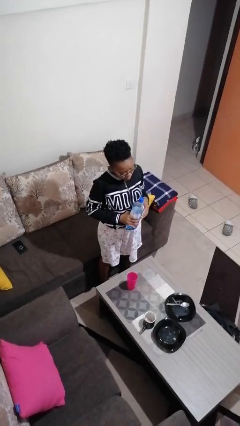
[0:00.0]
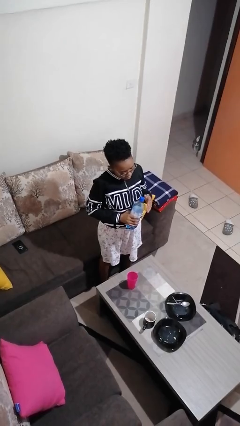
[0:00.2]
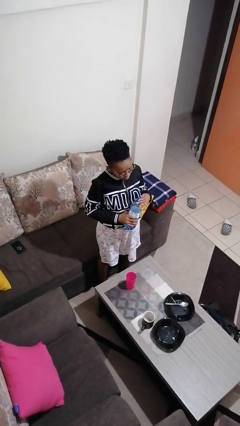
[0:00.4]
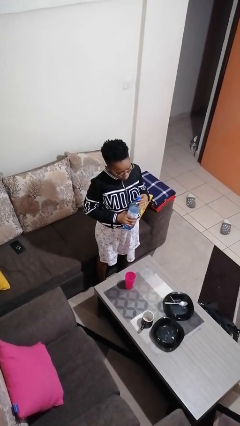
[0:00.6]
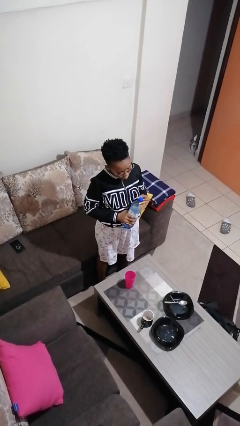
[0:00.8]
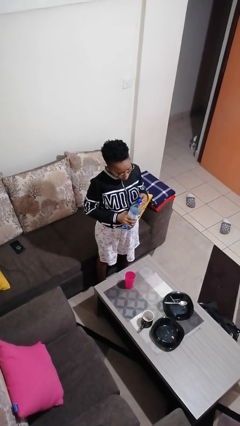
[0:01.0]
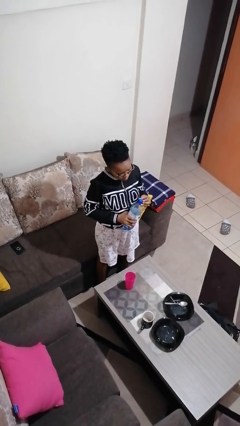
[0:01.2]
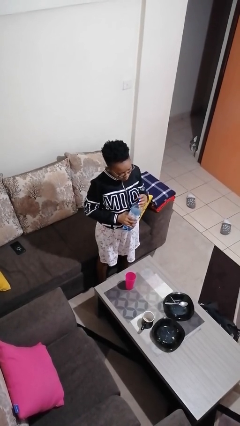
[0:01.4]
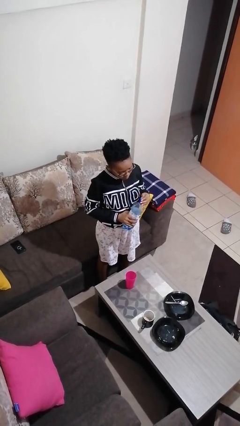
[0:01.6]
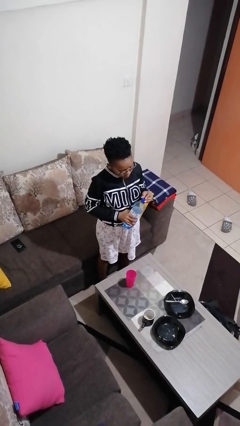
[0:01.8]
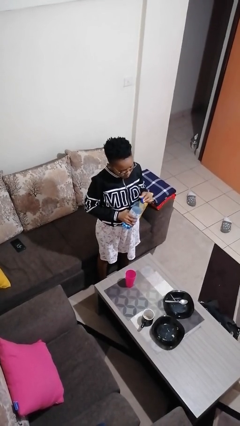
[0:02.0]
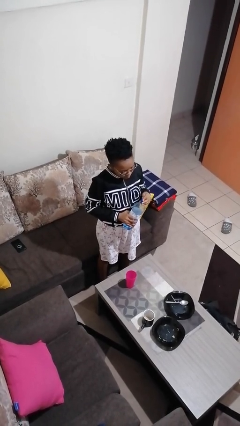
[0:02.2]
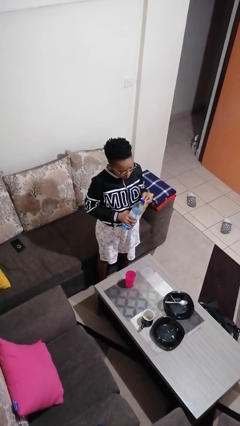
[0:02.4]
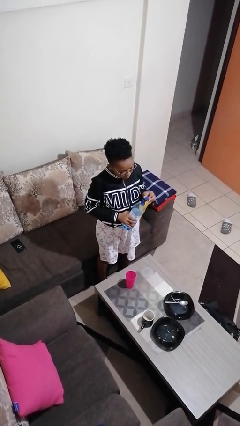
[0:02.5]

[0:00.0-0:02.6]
person unscrews lid from bottle

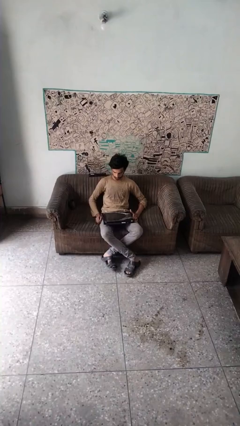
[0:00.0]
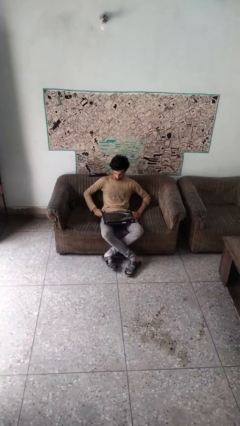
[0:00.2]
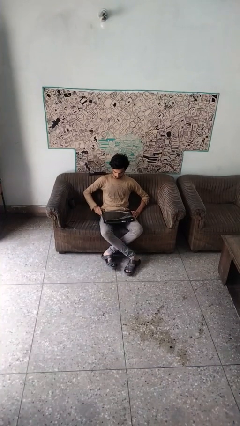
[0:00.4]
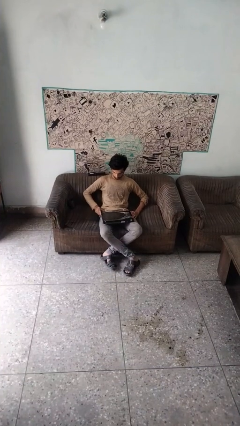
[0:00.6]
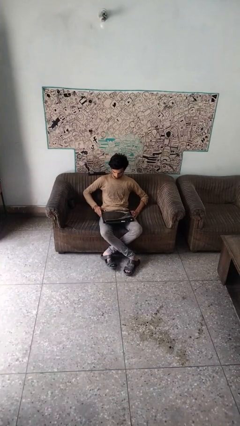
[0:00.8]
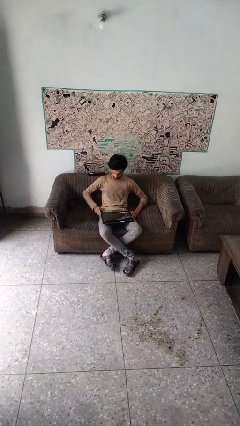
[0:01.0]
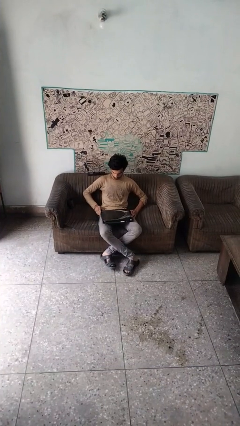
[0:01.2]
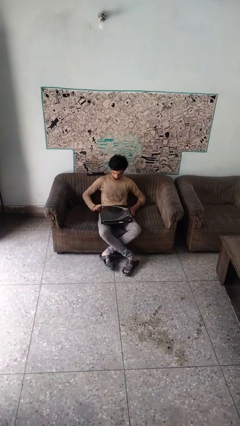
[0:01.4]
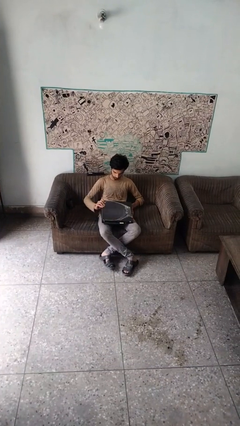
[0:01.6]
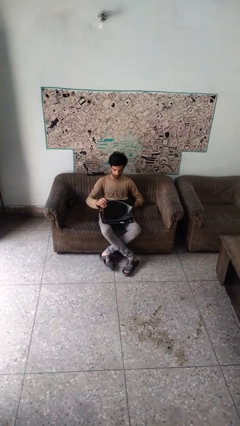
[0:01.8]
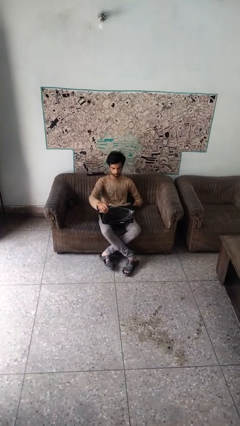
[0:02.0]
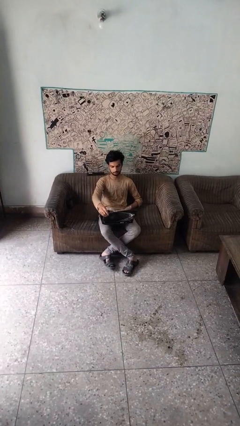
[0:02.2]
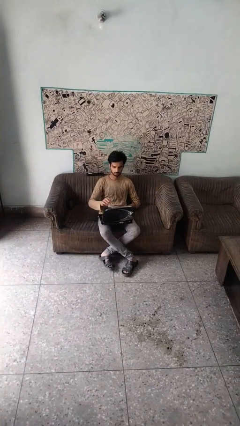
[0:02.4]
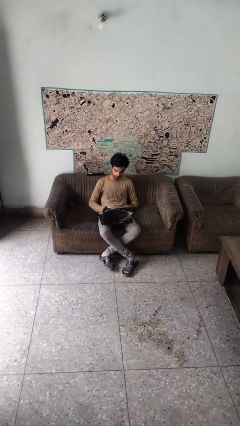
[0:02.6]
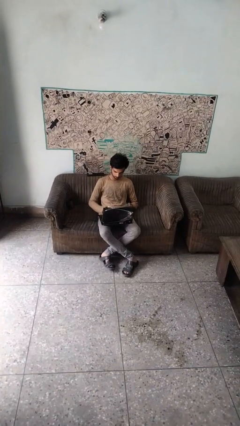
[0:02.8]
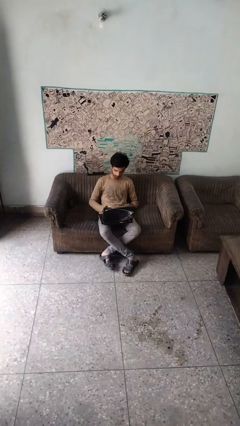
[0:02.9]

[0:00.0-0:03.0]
person opens laptop

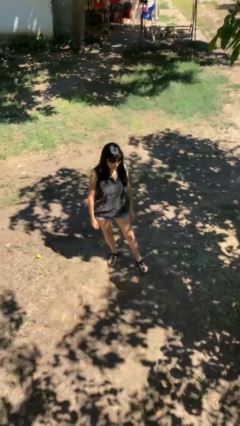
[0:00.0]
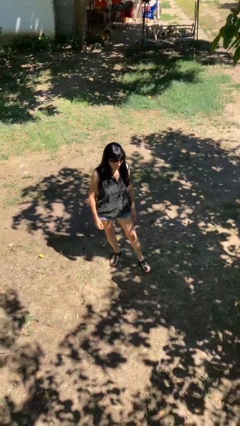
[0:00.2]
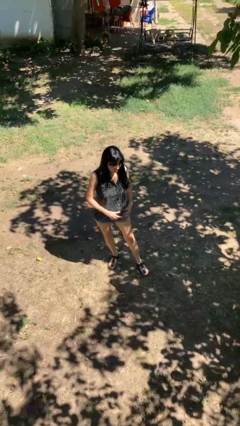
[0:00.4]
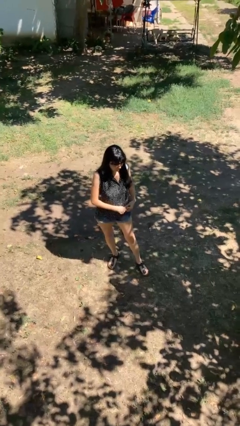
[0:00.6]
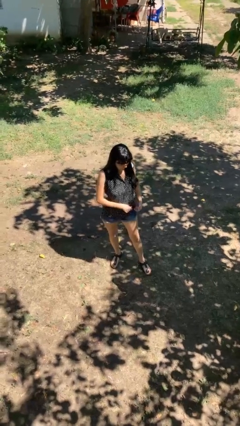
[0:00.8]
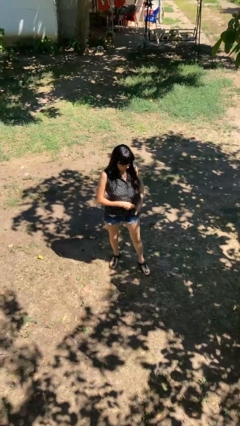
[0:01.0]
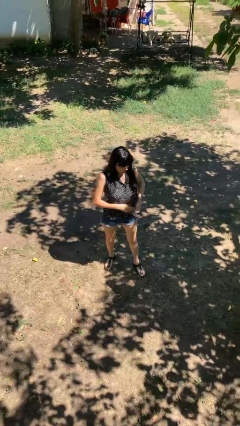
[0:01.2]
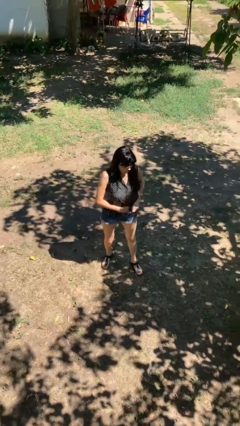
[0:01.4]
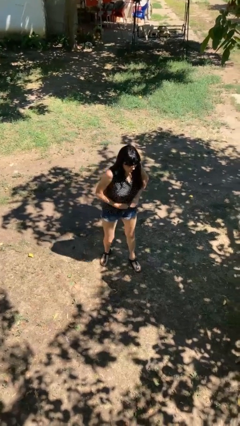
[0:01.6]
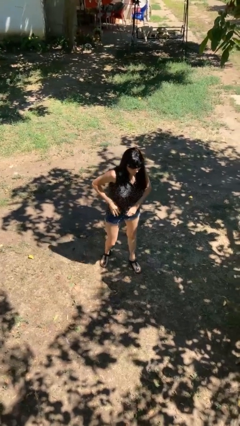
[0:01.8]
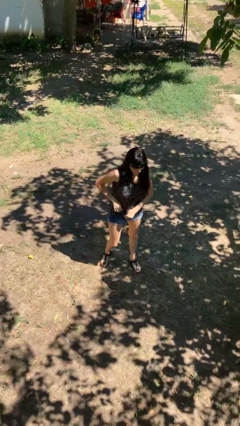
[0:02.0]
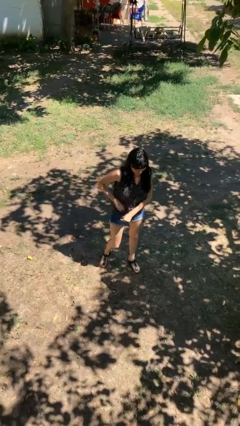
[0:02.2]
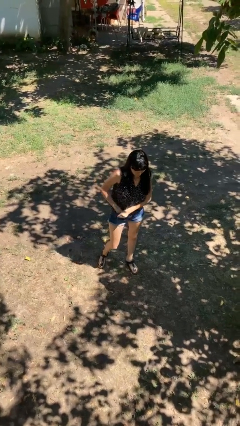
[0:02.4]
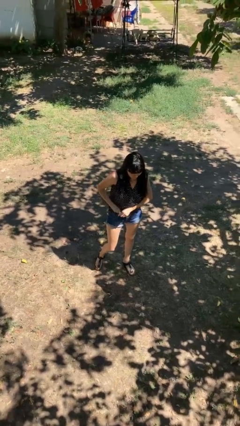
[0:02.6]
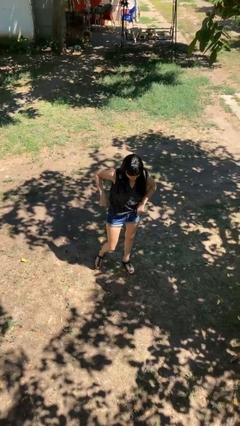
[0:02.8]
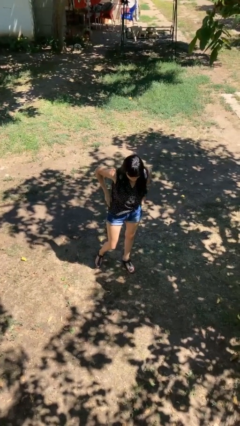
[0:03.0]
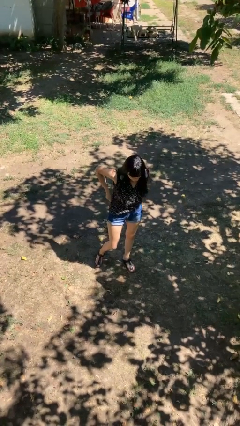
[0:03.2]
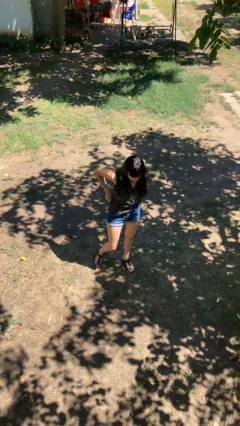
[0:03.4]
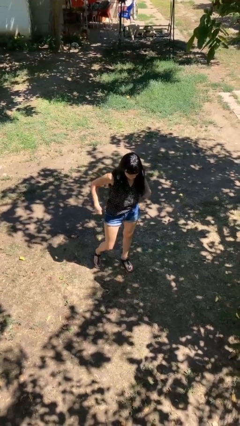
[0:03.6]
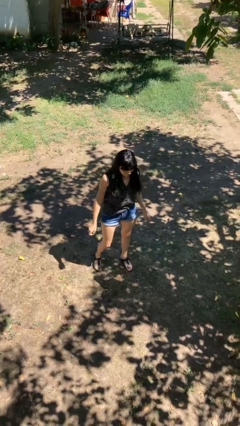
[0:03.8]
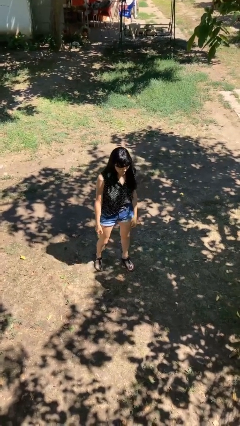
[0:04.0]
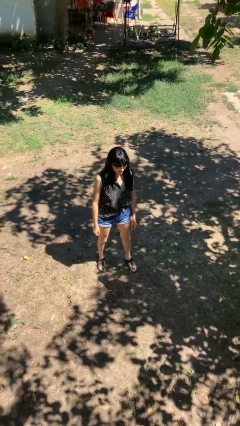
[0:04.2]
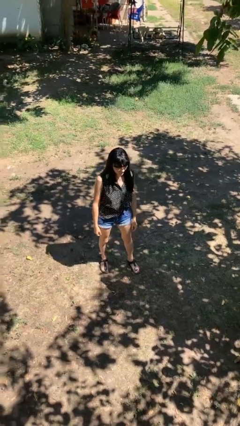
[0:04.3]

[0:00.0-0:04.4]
person tucks in shirt

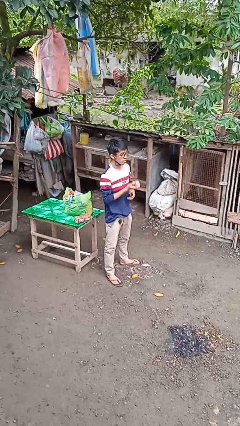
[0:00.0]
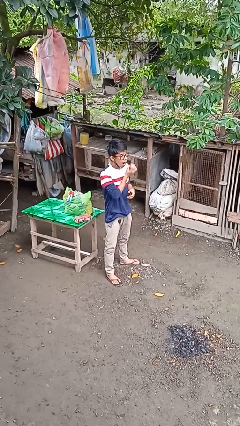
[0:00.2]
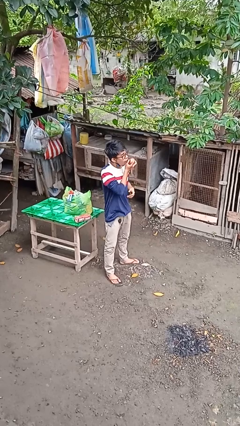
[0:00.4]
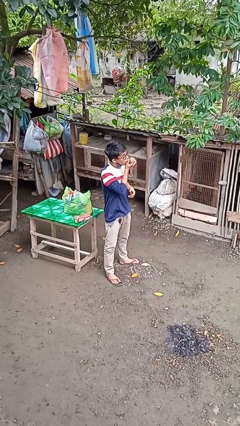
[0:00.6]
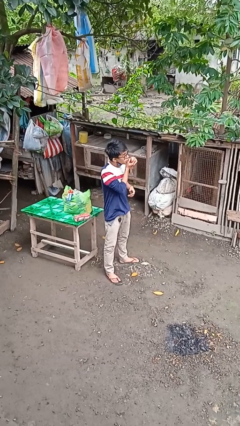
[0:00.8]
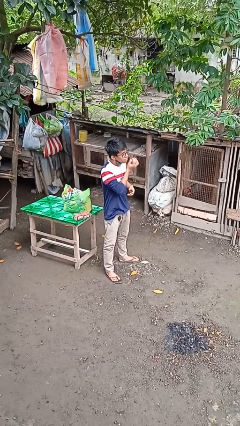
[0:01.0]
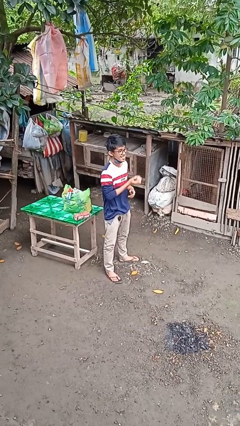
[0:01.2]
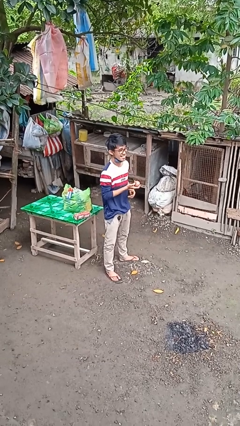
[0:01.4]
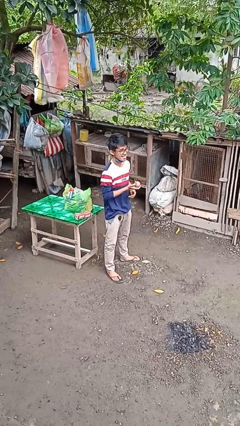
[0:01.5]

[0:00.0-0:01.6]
person eats apple

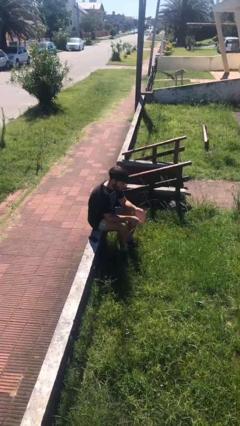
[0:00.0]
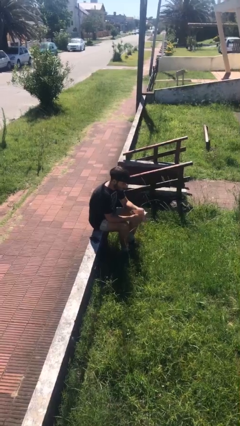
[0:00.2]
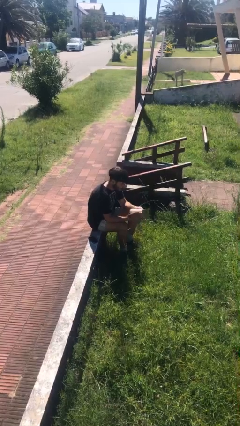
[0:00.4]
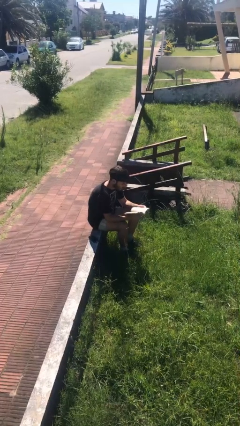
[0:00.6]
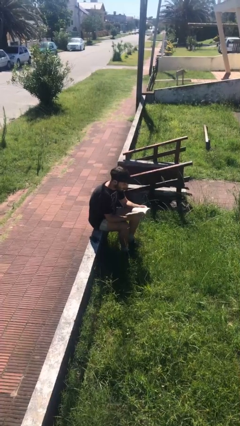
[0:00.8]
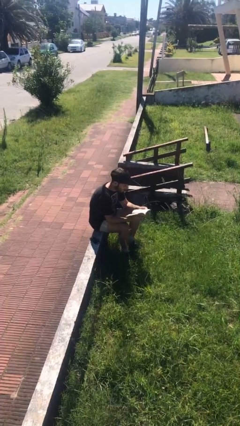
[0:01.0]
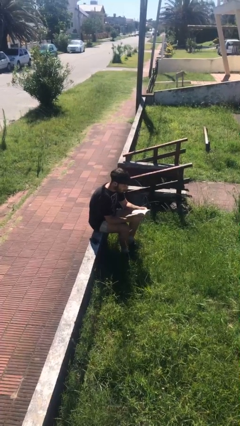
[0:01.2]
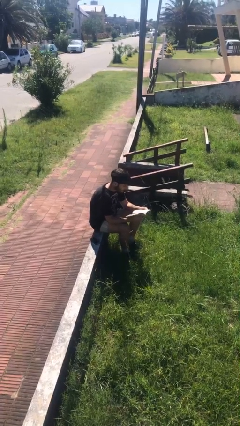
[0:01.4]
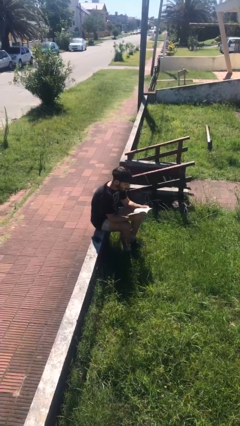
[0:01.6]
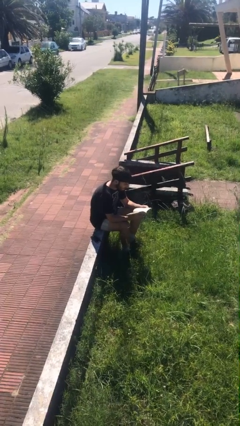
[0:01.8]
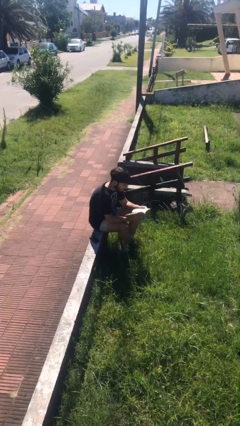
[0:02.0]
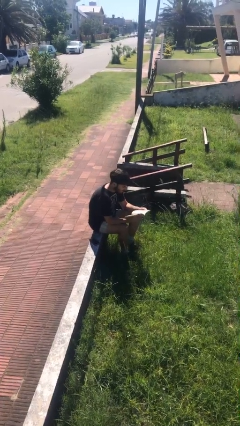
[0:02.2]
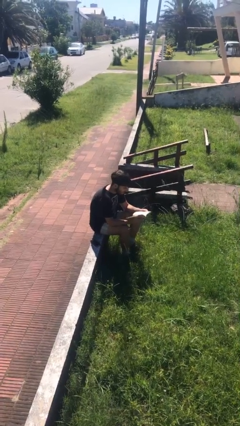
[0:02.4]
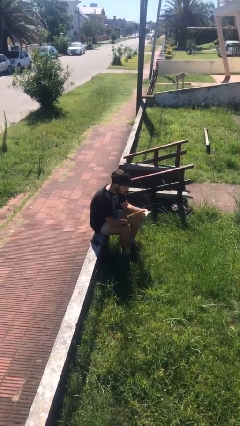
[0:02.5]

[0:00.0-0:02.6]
person reads document

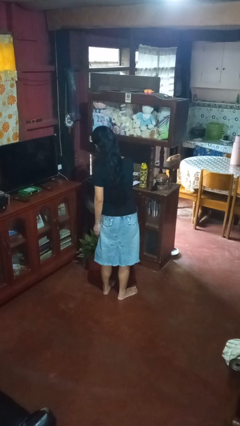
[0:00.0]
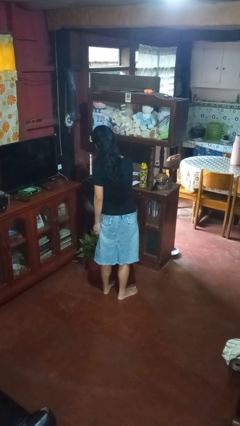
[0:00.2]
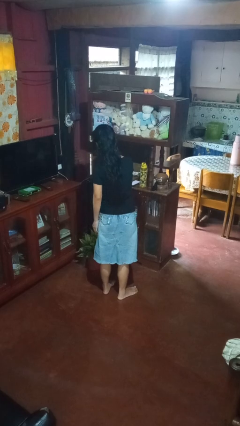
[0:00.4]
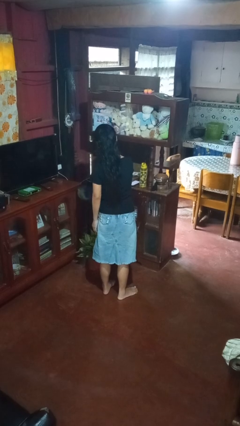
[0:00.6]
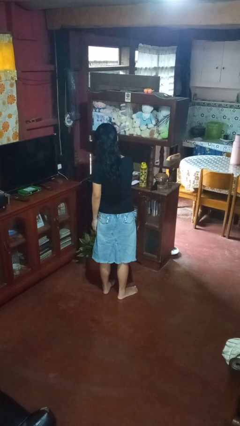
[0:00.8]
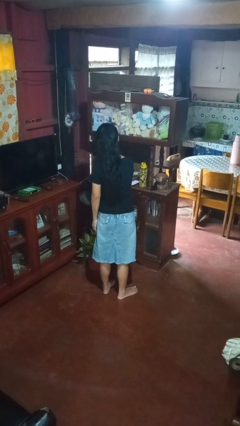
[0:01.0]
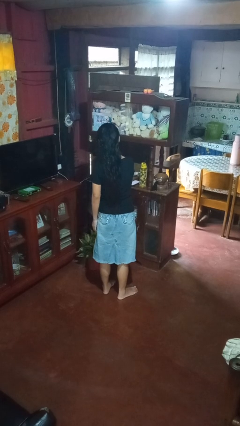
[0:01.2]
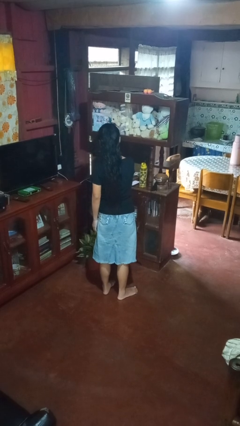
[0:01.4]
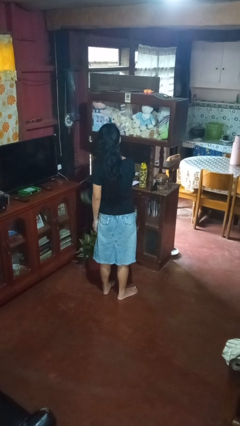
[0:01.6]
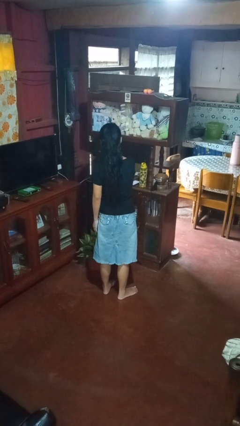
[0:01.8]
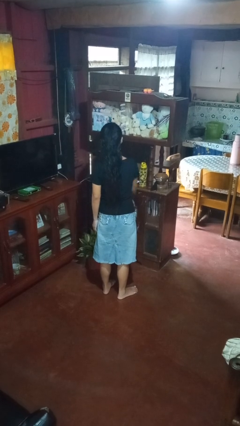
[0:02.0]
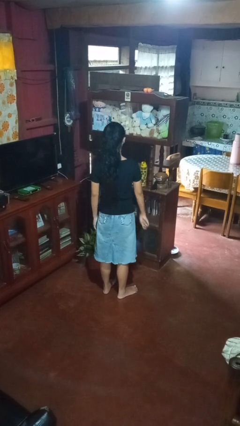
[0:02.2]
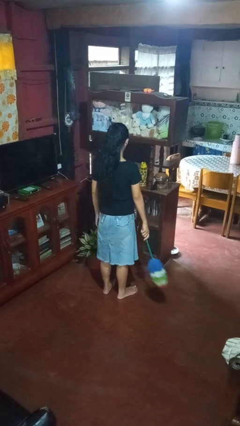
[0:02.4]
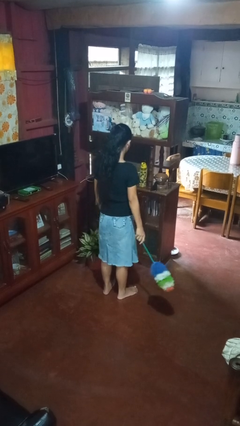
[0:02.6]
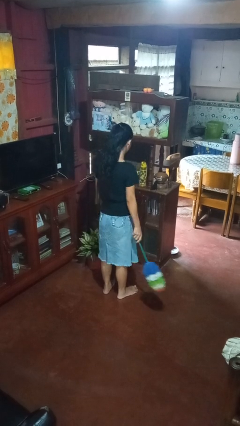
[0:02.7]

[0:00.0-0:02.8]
person dusts furniture

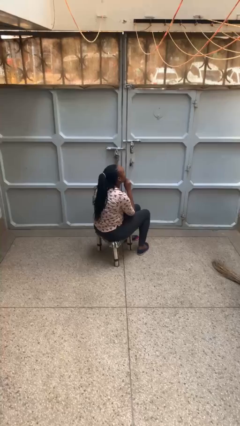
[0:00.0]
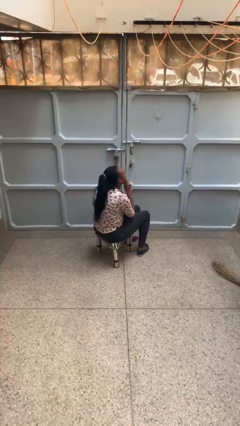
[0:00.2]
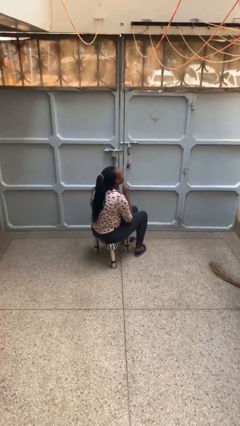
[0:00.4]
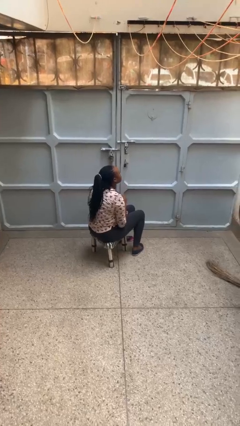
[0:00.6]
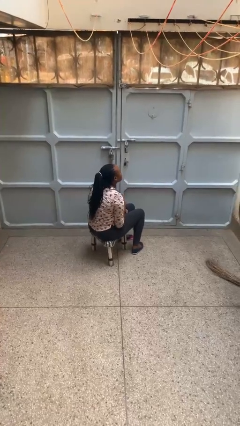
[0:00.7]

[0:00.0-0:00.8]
person strokes chin
